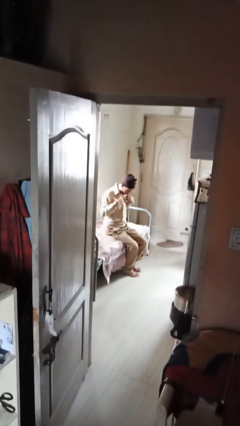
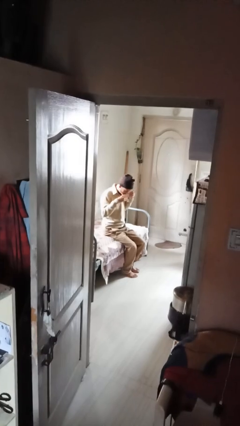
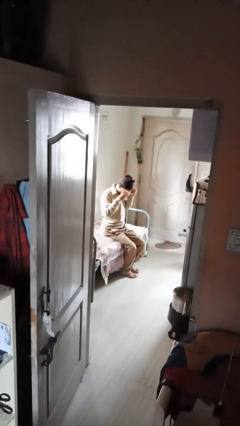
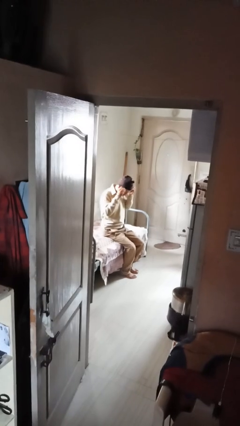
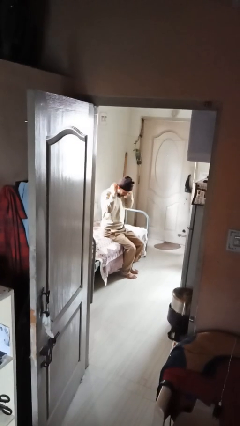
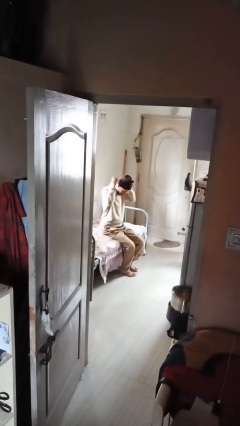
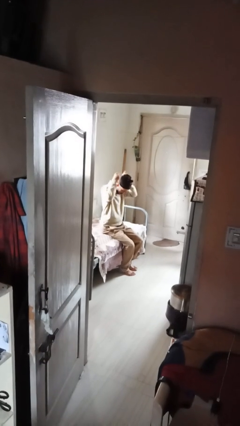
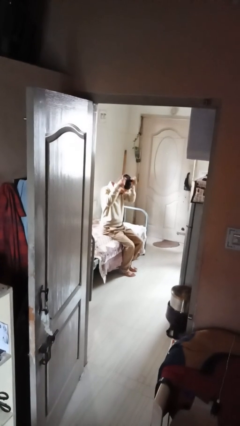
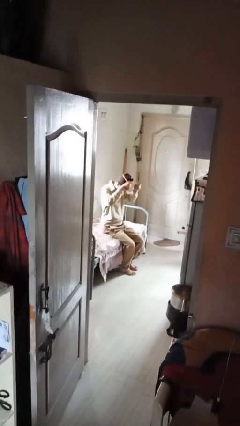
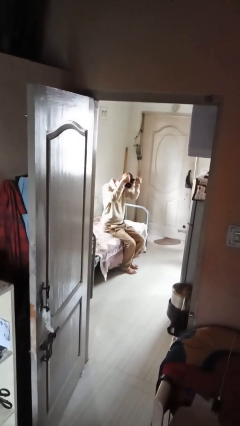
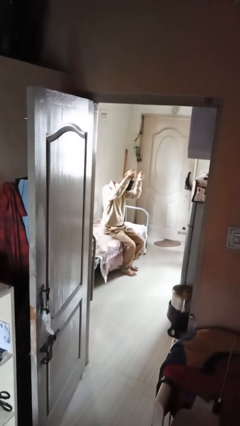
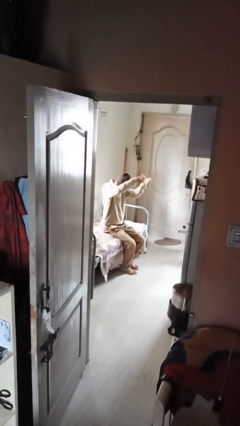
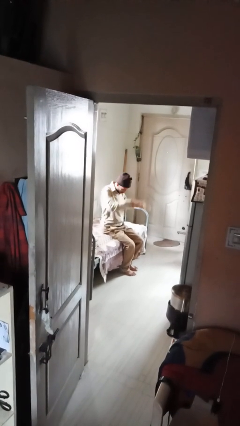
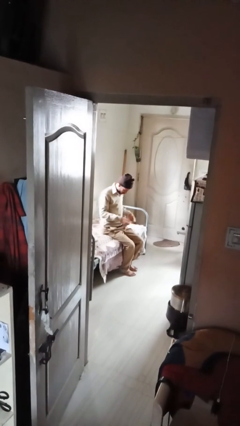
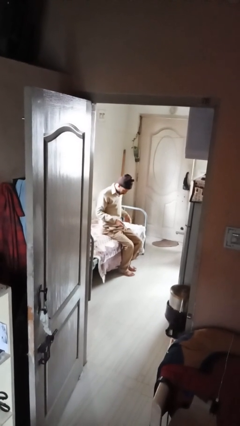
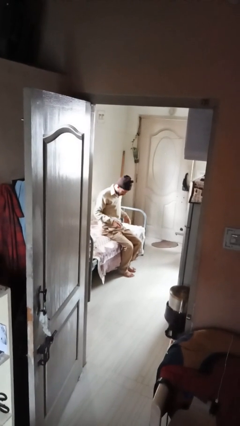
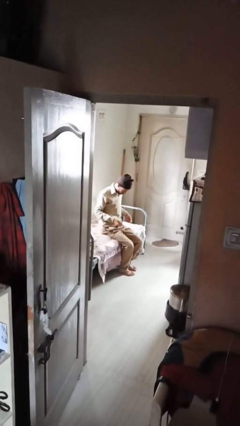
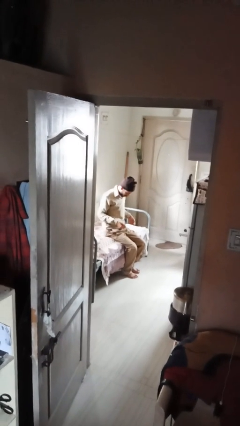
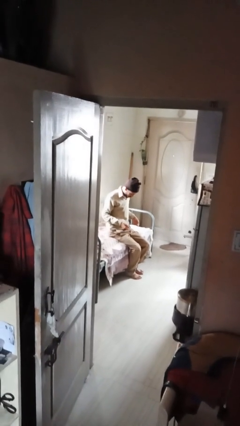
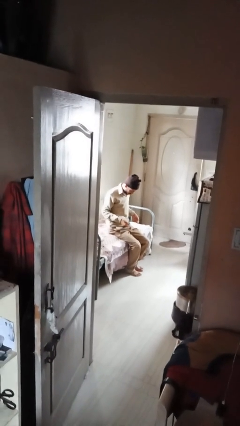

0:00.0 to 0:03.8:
person takes off necklace

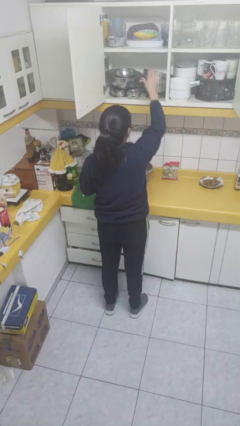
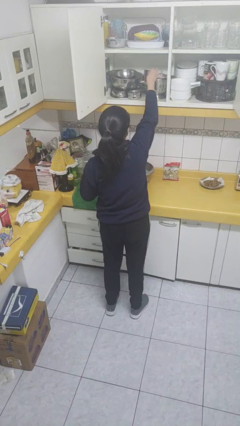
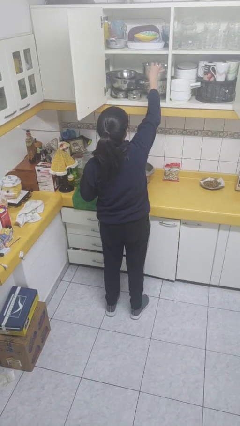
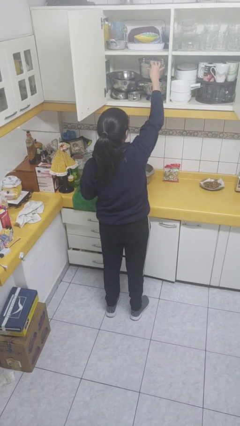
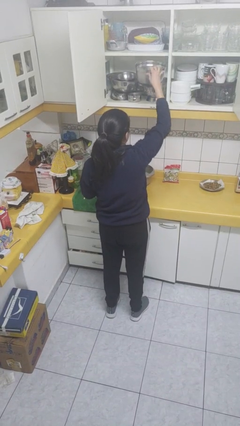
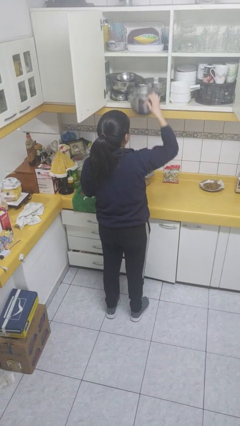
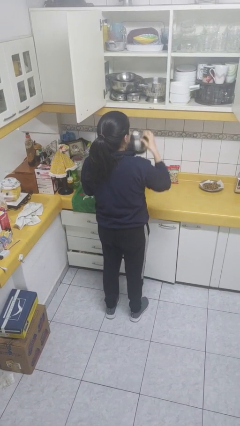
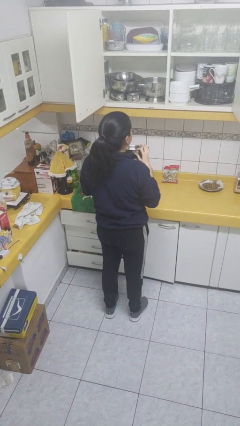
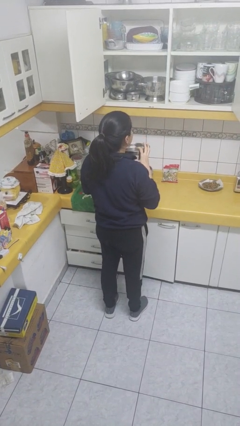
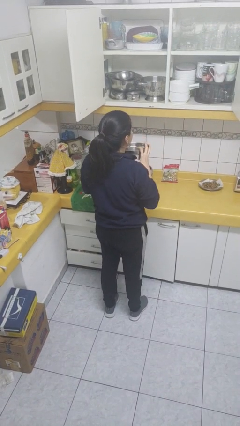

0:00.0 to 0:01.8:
person picks up object from cabinet

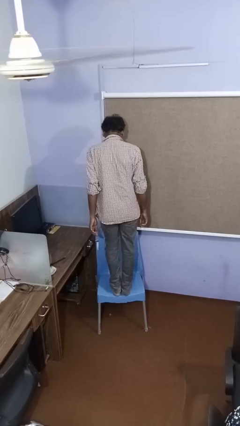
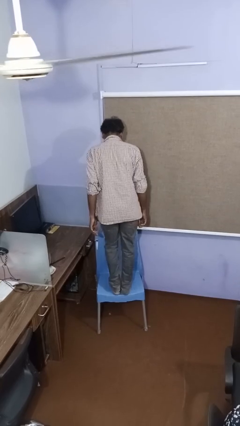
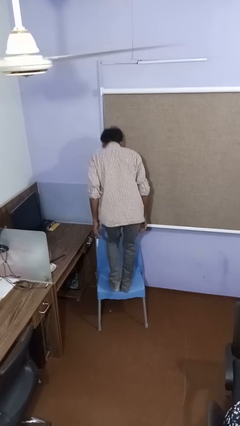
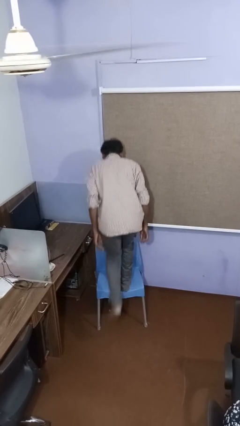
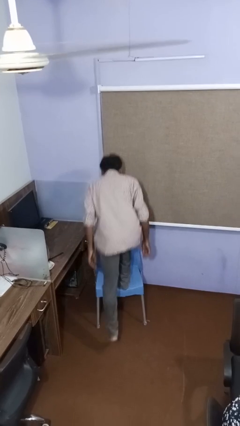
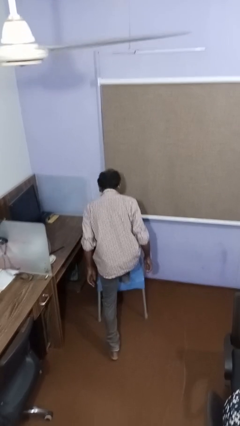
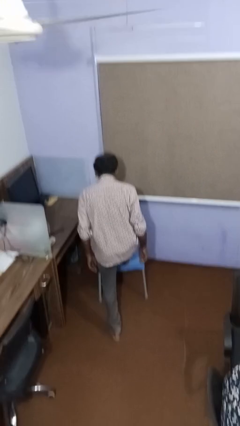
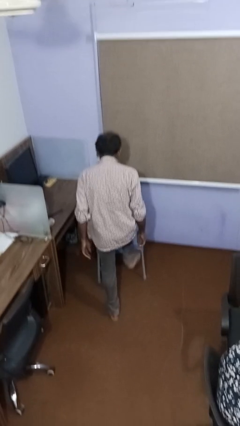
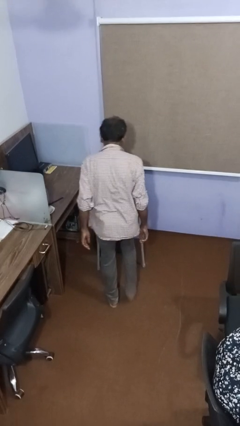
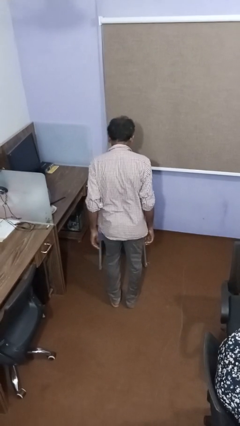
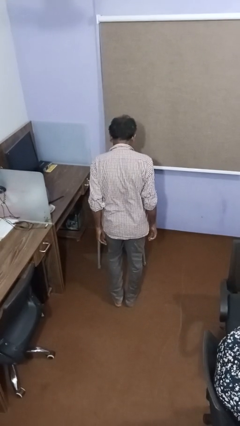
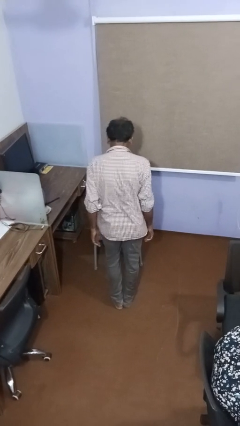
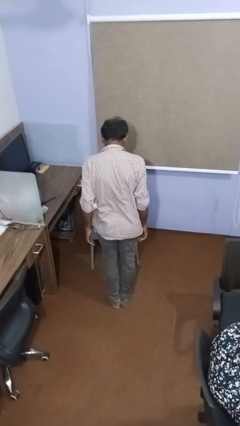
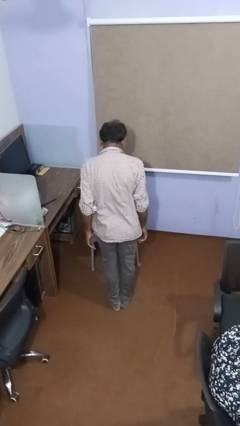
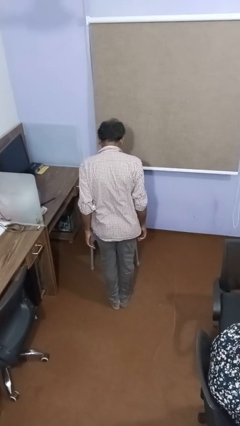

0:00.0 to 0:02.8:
person climbs off chair

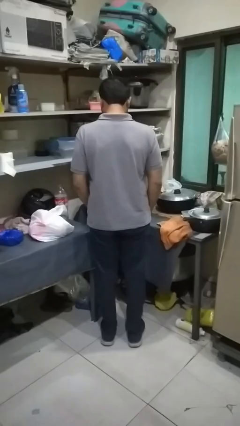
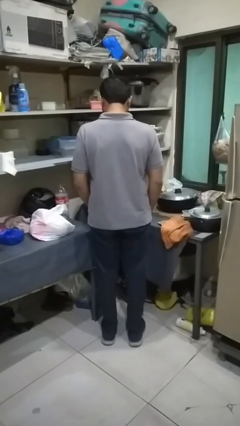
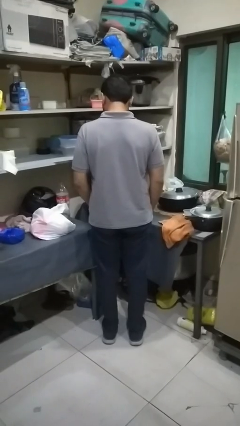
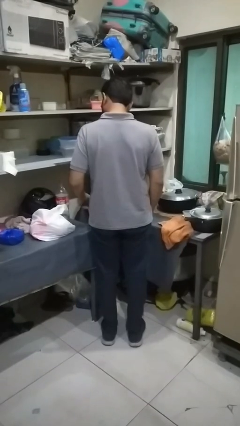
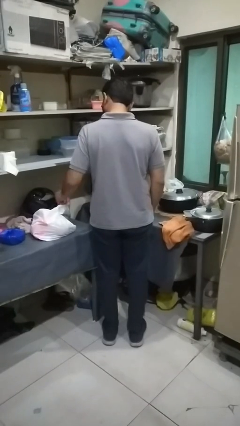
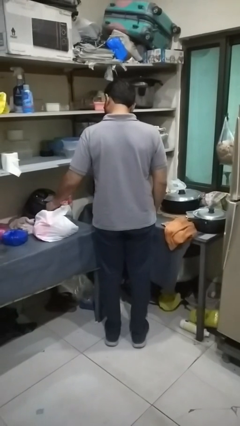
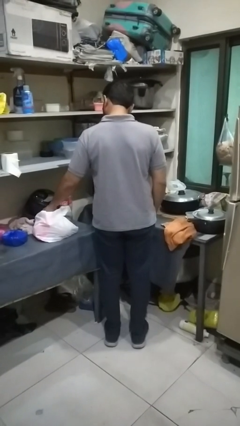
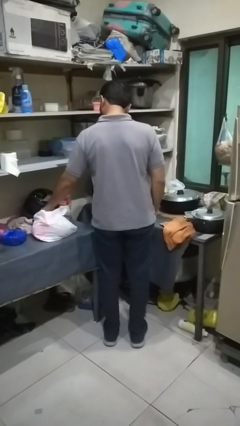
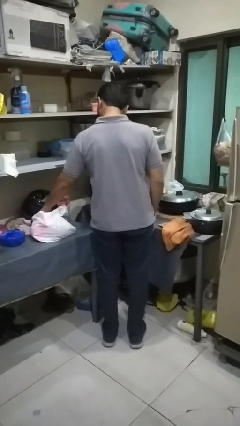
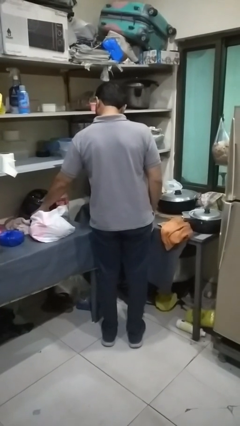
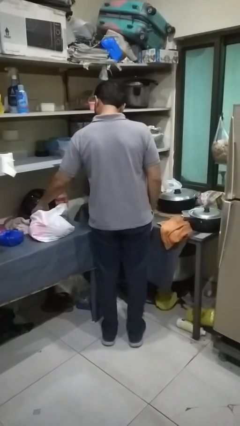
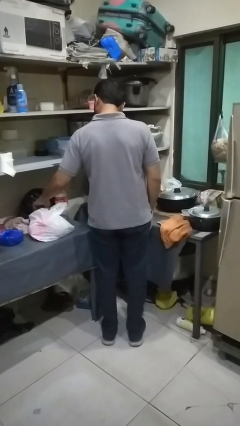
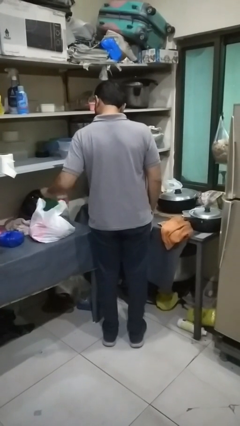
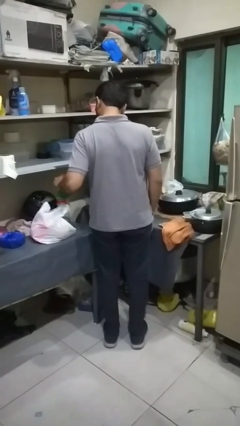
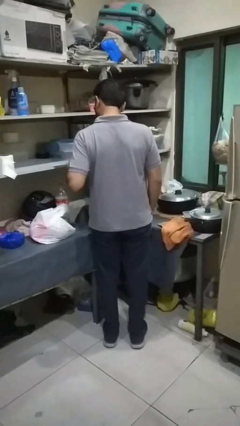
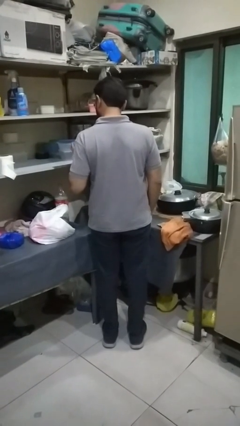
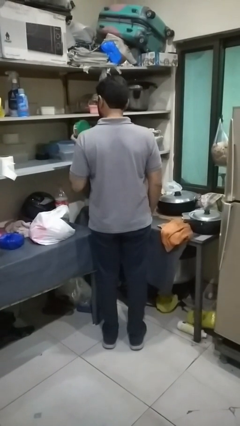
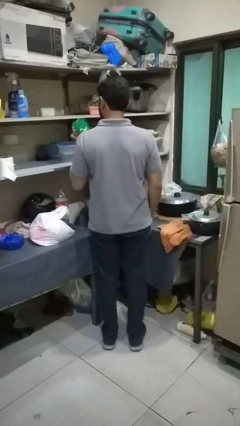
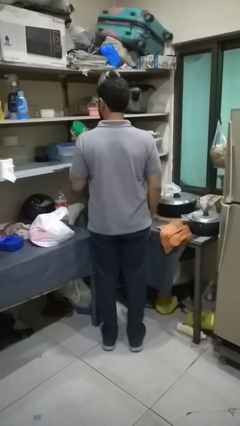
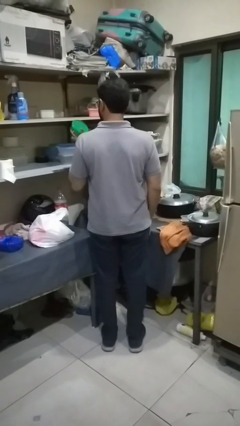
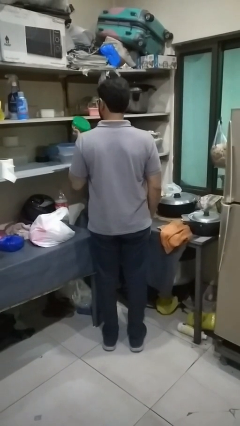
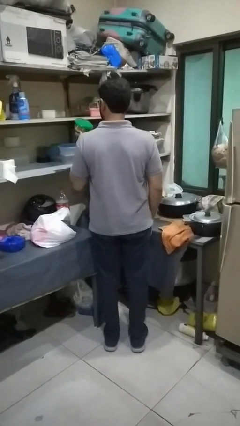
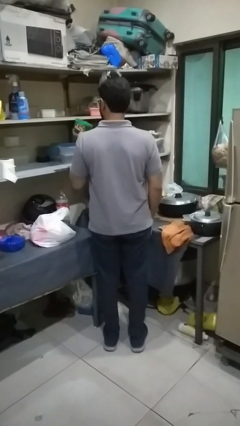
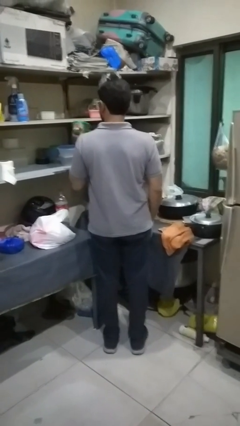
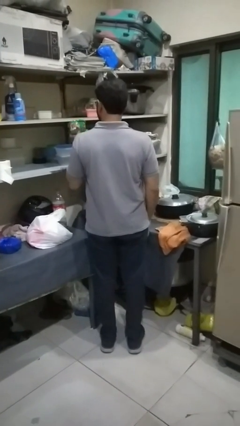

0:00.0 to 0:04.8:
person takes object from bag

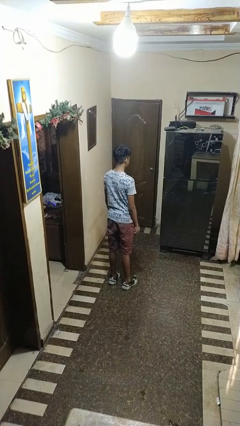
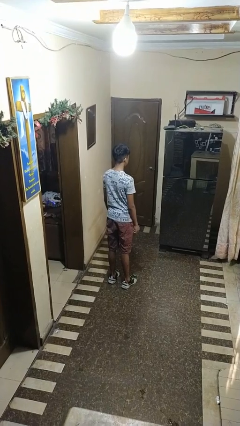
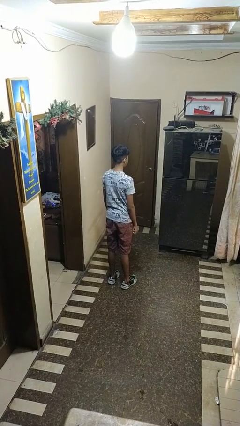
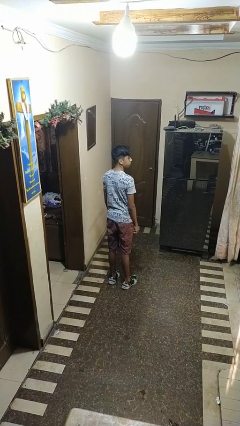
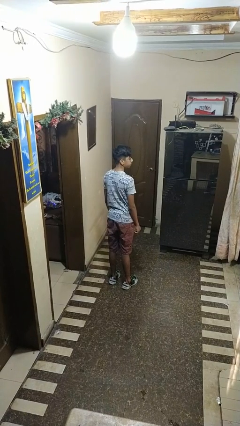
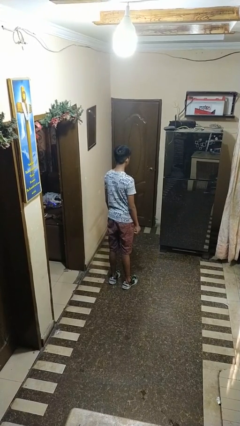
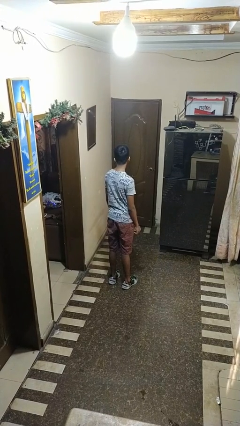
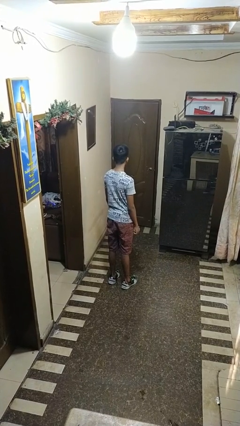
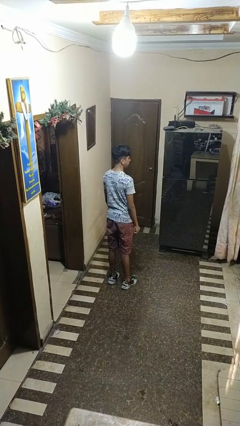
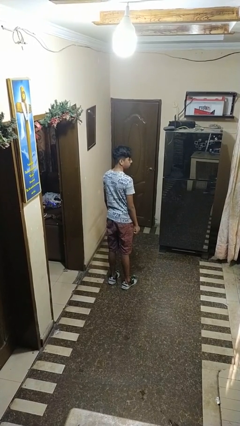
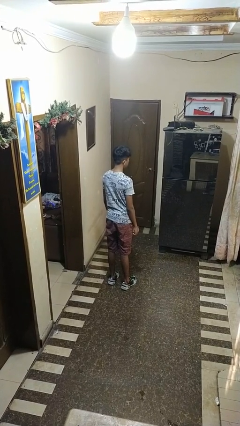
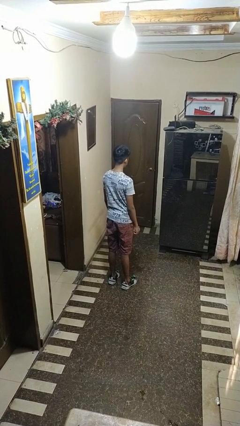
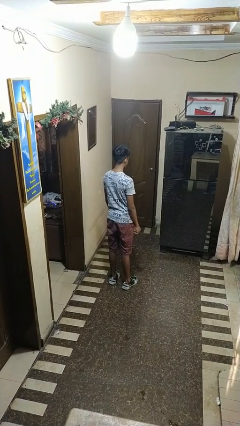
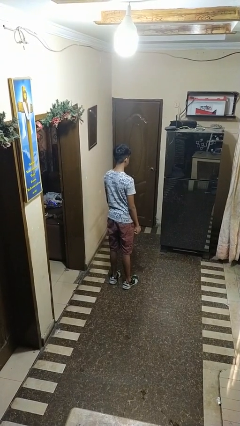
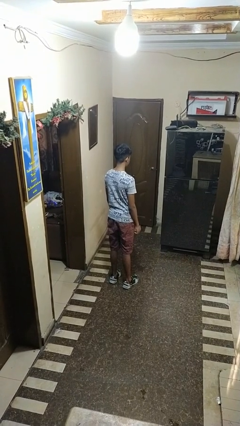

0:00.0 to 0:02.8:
person nods head

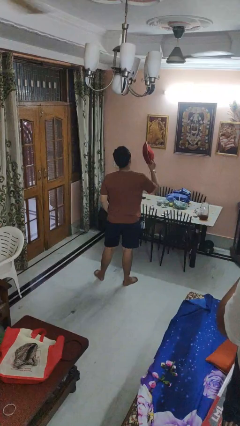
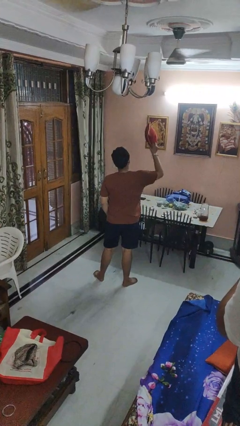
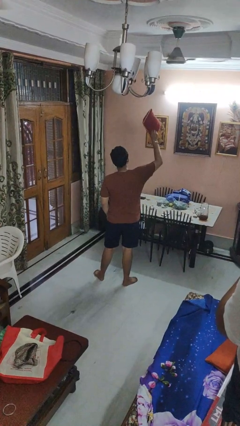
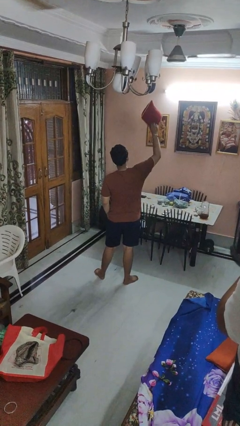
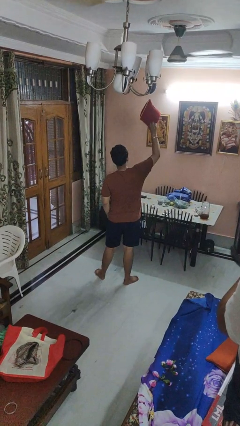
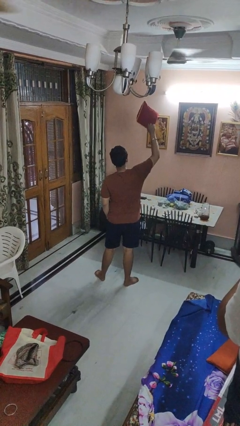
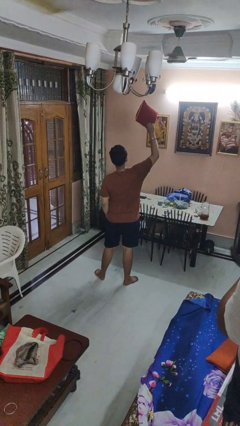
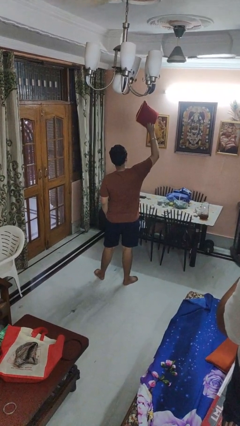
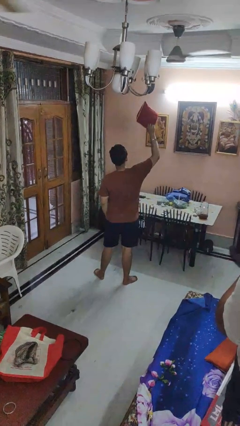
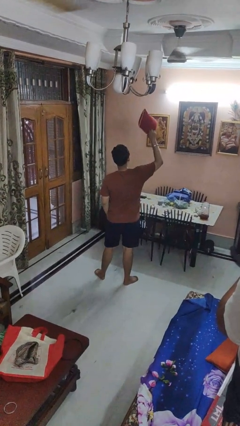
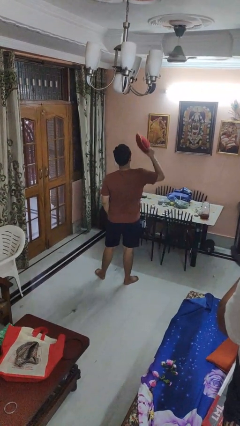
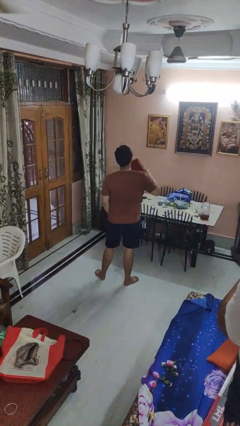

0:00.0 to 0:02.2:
person holds object above head
